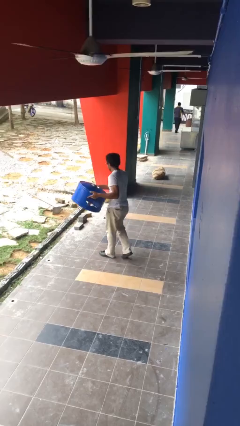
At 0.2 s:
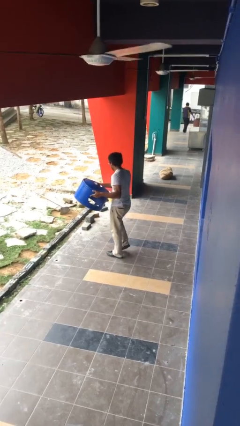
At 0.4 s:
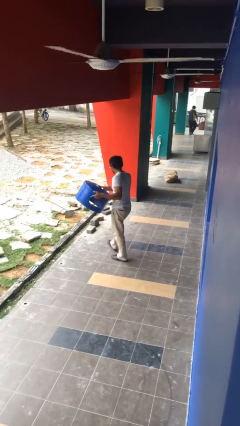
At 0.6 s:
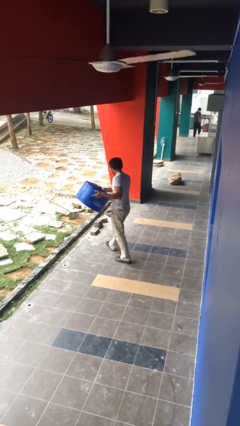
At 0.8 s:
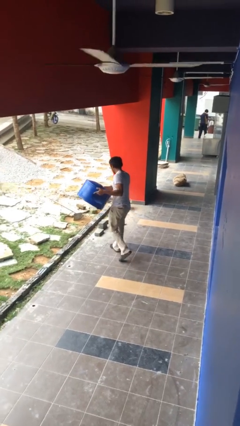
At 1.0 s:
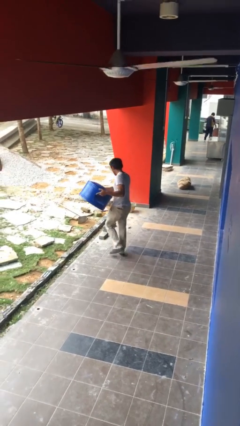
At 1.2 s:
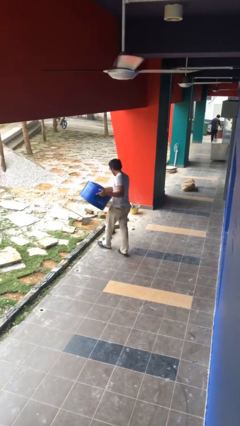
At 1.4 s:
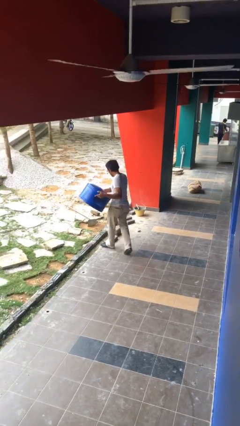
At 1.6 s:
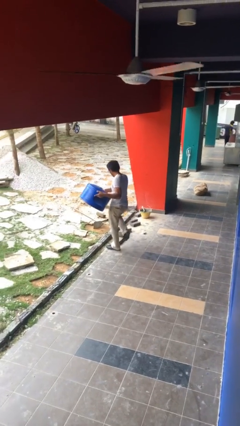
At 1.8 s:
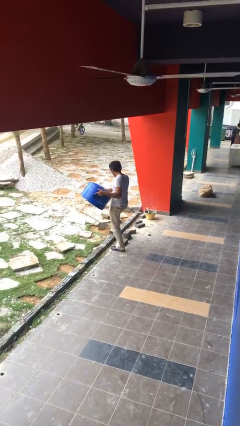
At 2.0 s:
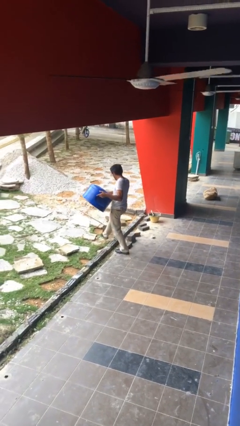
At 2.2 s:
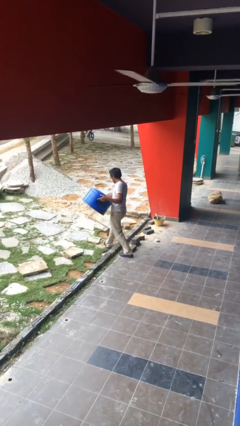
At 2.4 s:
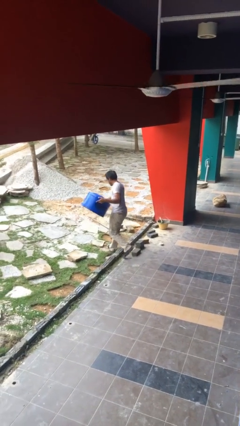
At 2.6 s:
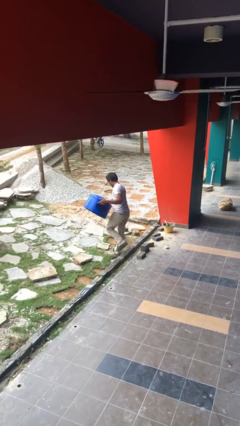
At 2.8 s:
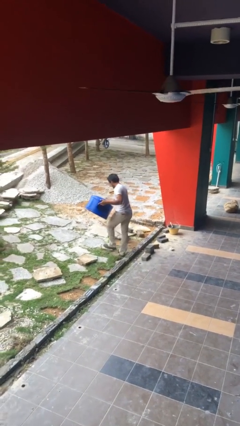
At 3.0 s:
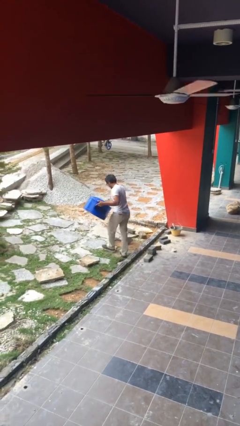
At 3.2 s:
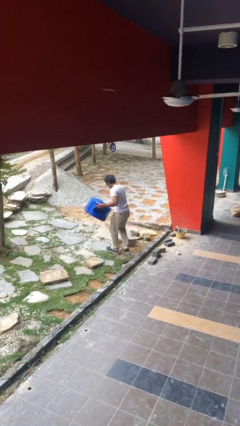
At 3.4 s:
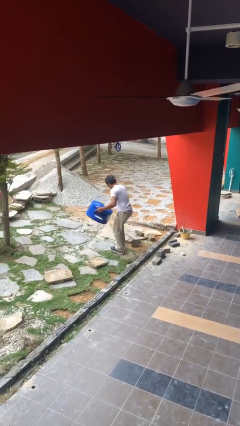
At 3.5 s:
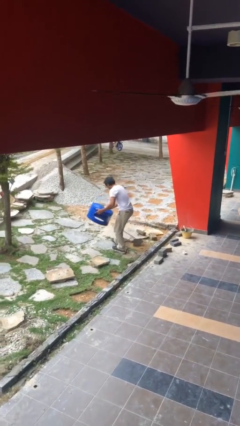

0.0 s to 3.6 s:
person carries heavy object

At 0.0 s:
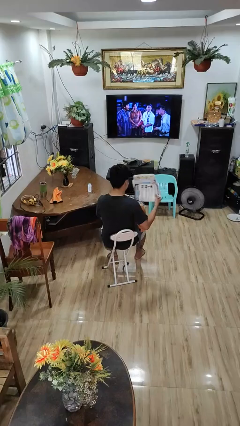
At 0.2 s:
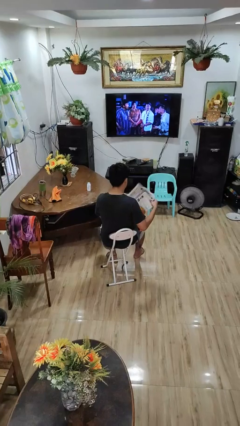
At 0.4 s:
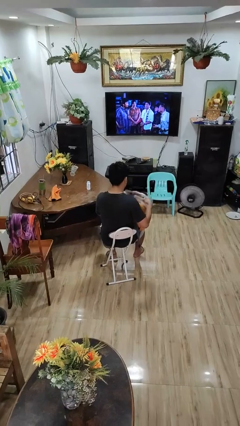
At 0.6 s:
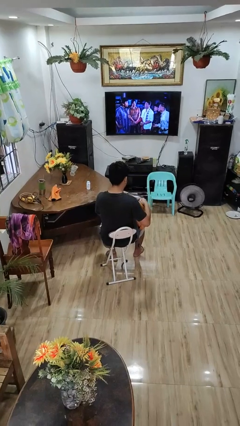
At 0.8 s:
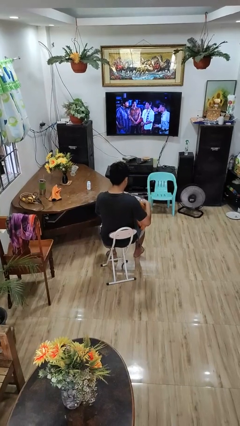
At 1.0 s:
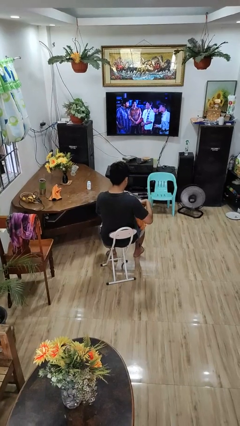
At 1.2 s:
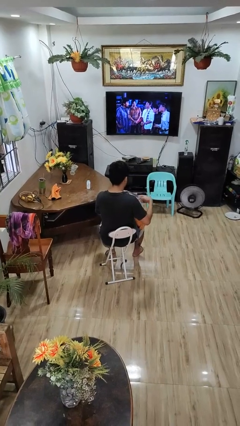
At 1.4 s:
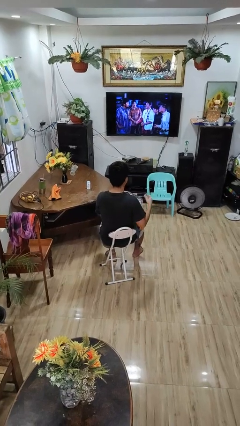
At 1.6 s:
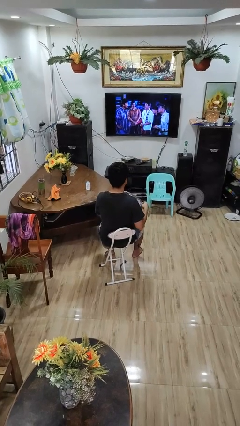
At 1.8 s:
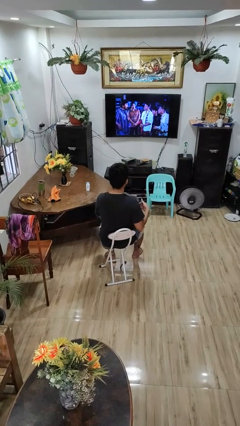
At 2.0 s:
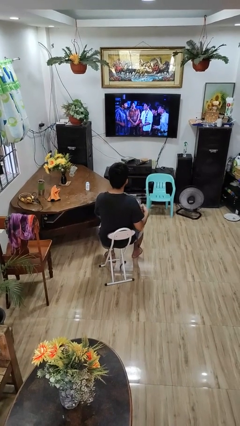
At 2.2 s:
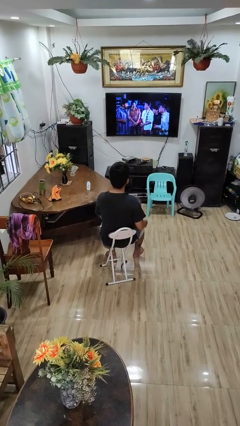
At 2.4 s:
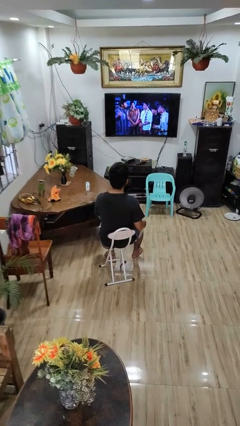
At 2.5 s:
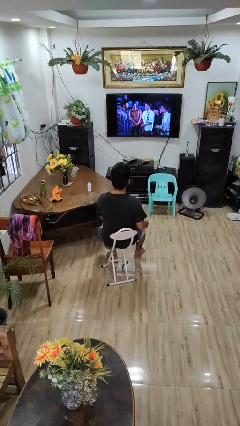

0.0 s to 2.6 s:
person puts object into backpack

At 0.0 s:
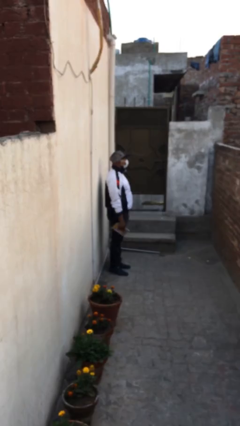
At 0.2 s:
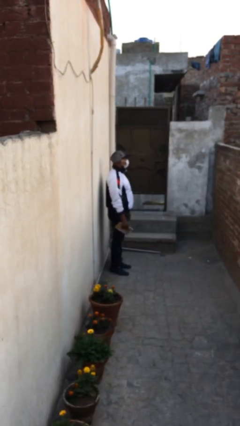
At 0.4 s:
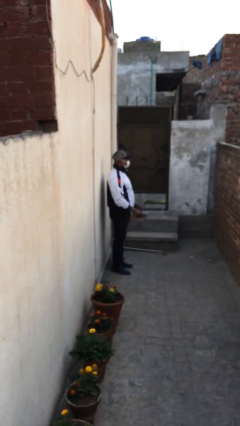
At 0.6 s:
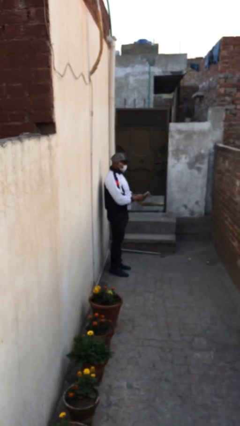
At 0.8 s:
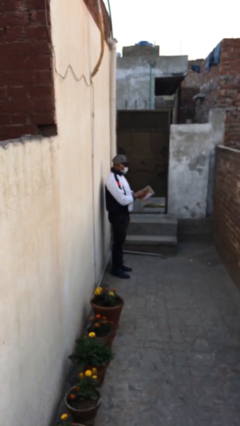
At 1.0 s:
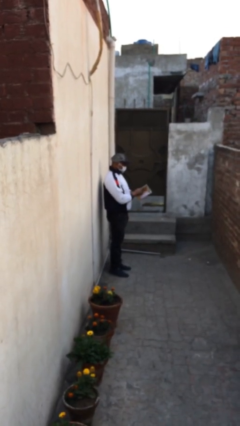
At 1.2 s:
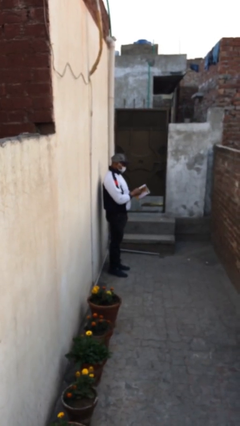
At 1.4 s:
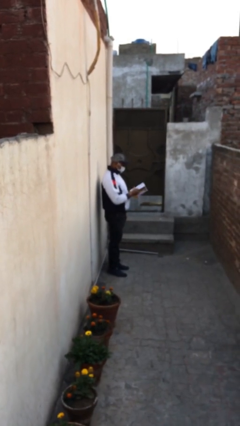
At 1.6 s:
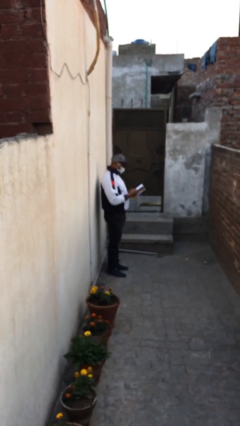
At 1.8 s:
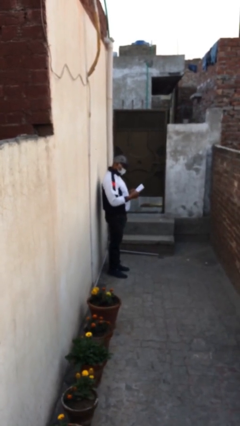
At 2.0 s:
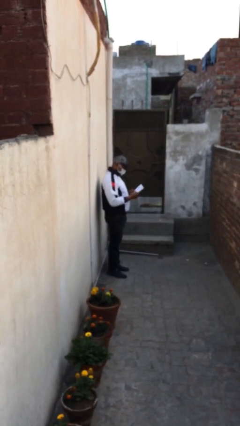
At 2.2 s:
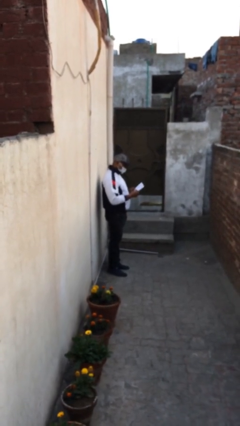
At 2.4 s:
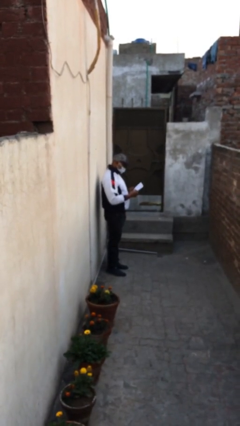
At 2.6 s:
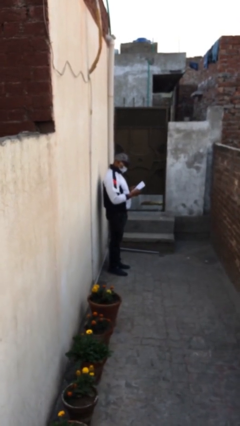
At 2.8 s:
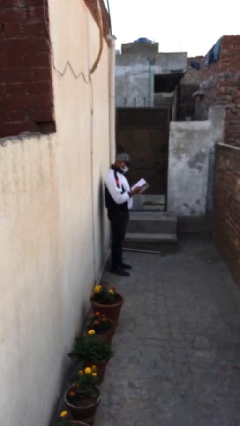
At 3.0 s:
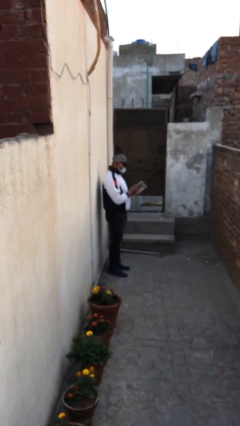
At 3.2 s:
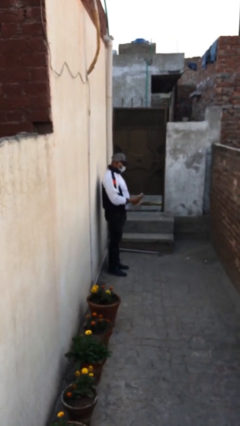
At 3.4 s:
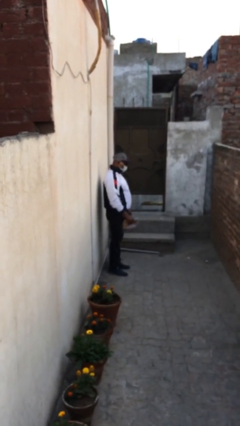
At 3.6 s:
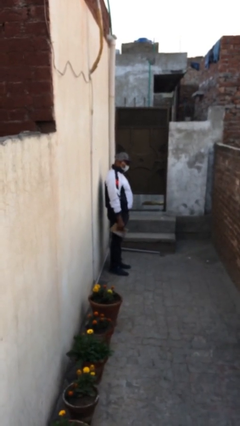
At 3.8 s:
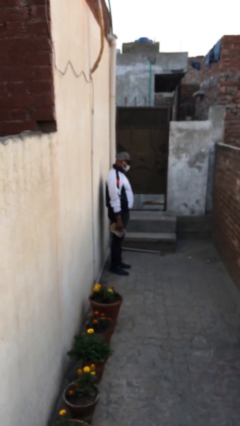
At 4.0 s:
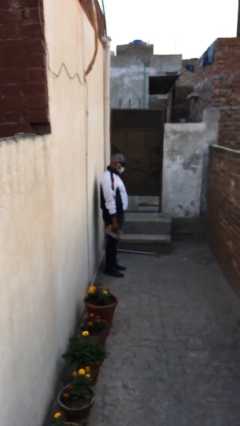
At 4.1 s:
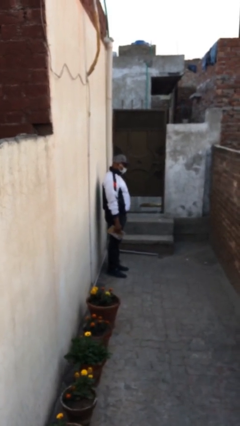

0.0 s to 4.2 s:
person reads document

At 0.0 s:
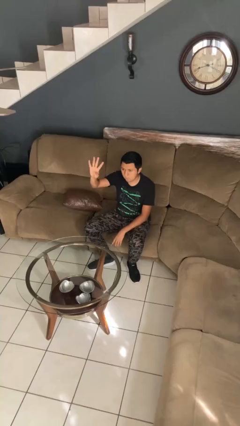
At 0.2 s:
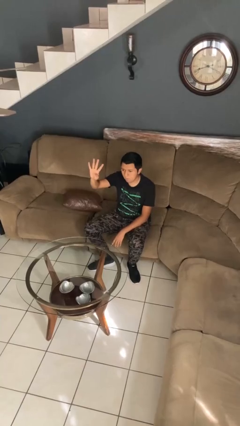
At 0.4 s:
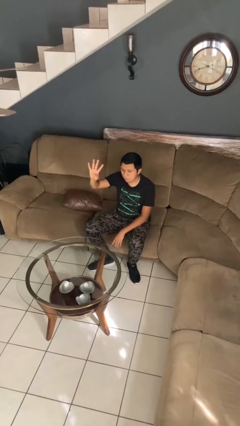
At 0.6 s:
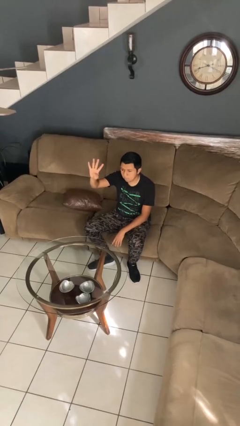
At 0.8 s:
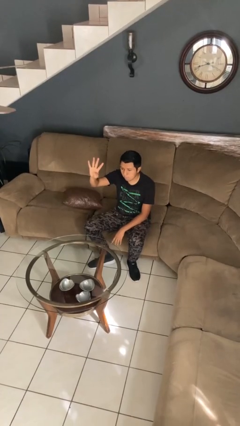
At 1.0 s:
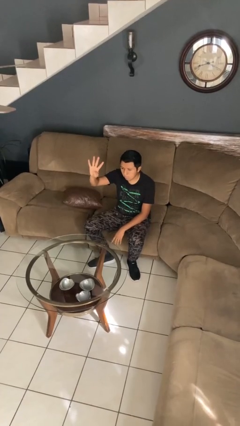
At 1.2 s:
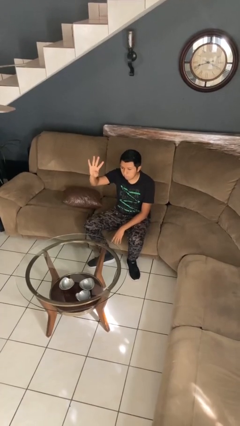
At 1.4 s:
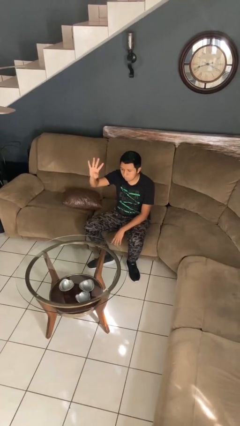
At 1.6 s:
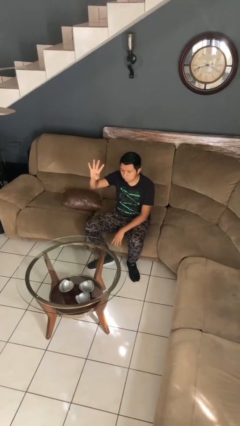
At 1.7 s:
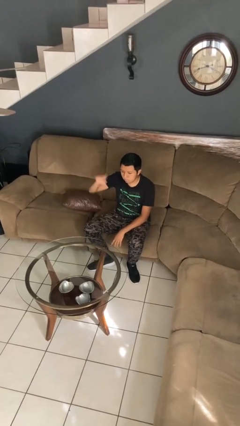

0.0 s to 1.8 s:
person gestures number four

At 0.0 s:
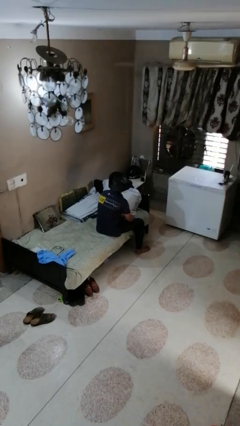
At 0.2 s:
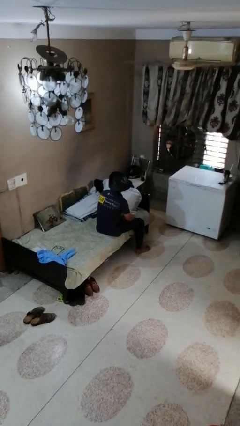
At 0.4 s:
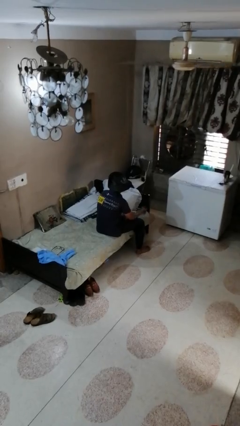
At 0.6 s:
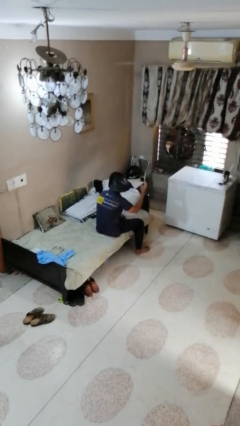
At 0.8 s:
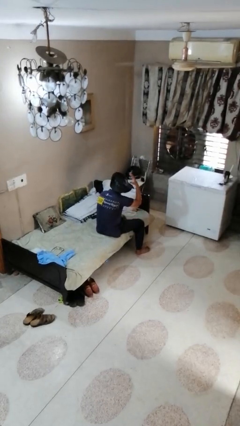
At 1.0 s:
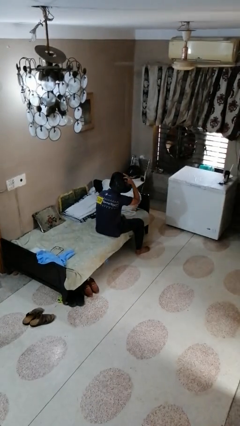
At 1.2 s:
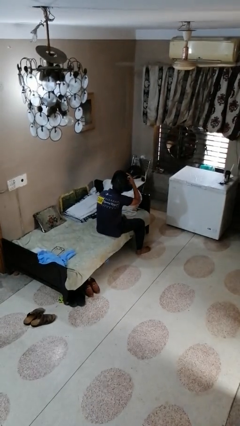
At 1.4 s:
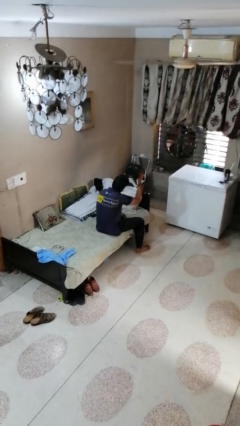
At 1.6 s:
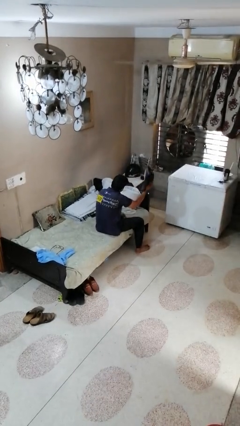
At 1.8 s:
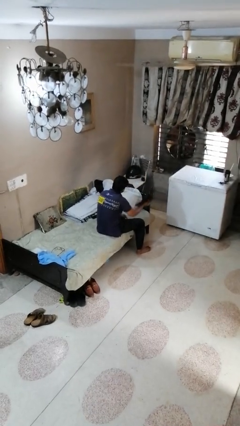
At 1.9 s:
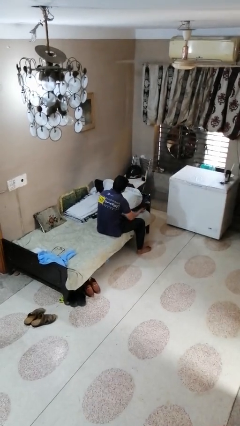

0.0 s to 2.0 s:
person takes off hat

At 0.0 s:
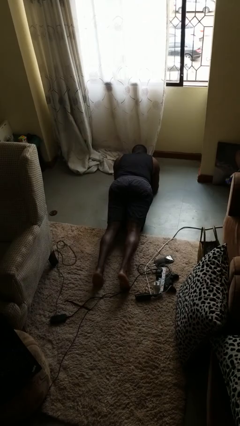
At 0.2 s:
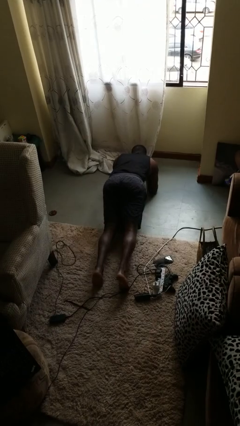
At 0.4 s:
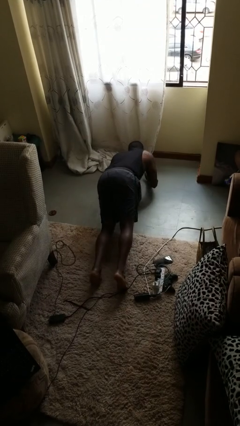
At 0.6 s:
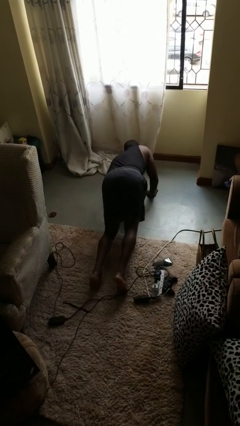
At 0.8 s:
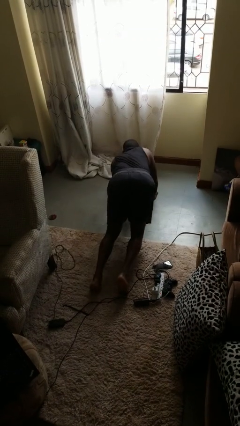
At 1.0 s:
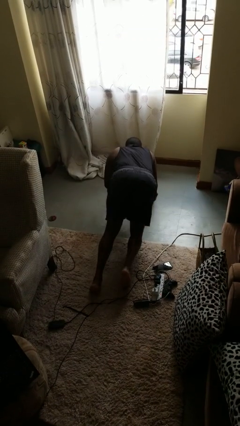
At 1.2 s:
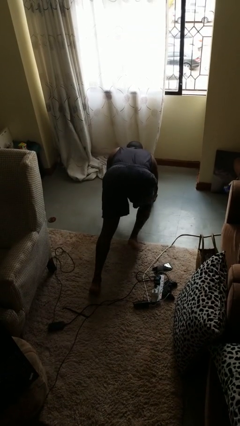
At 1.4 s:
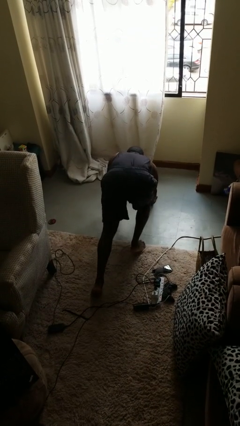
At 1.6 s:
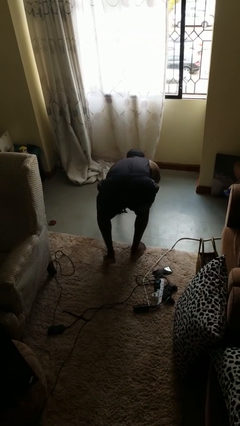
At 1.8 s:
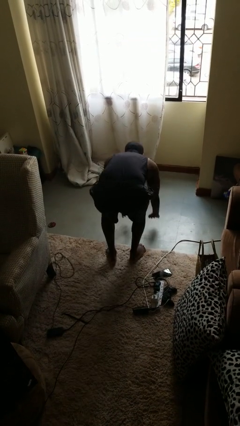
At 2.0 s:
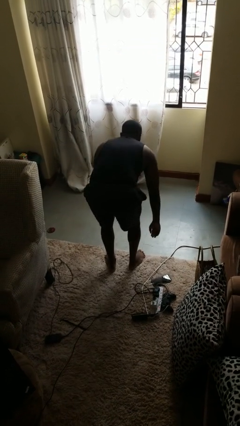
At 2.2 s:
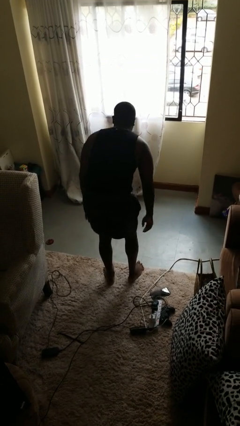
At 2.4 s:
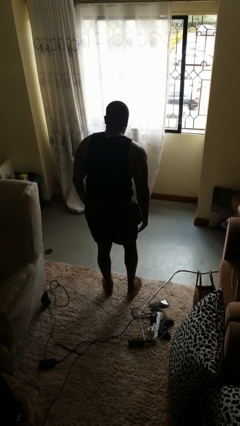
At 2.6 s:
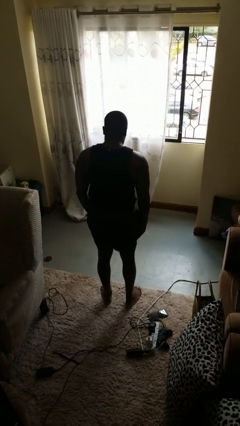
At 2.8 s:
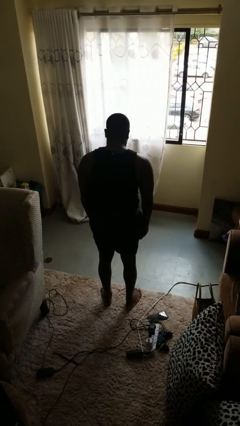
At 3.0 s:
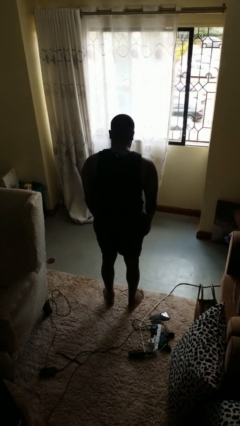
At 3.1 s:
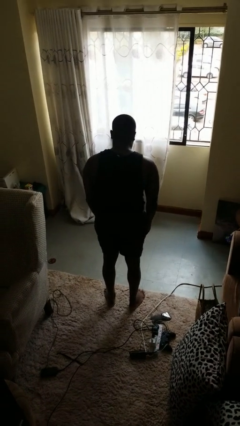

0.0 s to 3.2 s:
person stands up from floor
